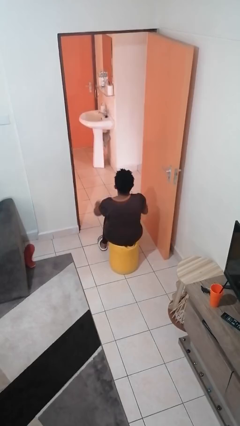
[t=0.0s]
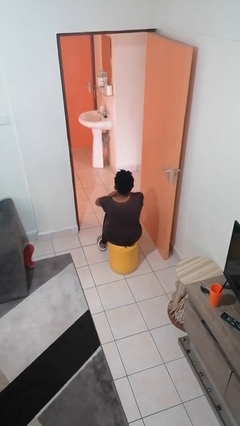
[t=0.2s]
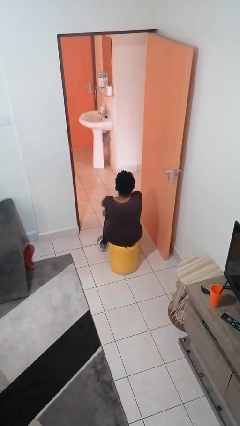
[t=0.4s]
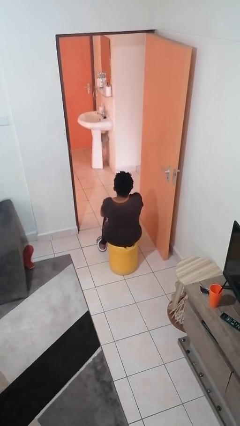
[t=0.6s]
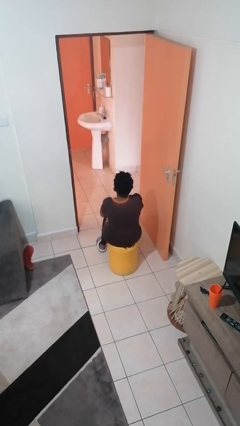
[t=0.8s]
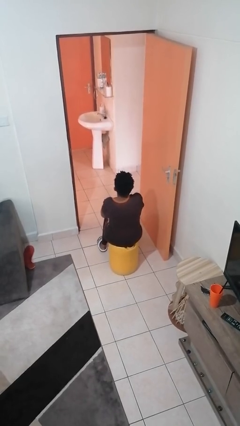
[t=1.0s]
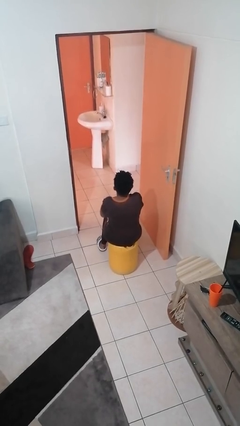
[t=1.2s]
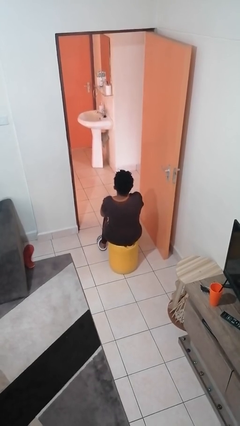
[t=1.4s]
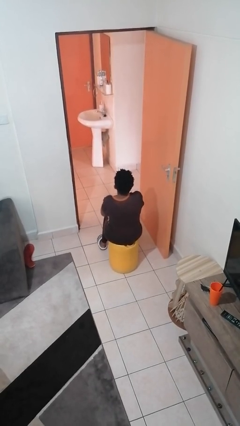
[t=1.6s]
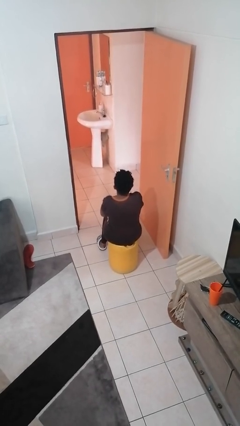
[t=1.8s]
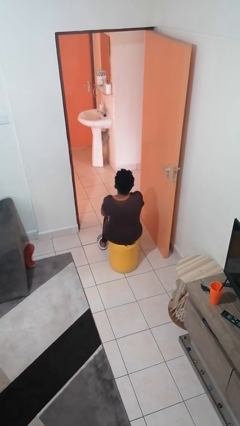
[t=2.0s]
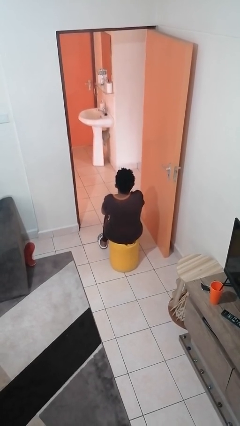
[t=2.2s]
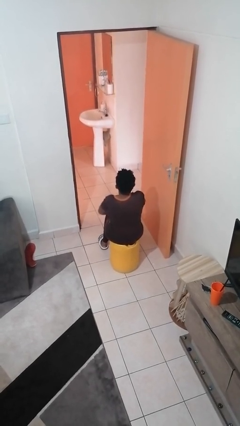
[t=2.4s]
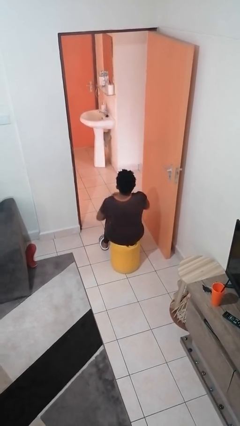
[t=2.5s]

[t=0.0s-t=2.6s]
person crosses arms

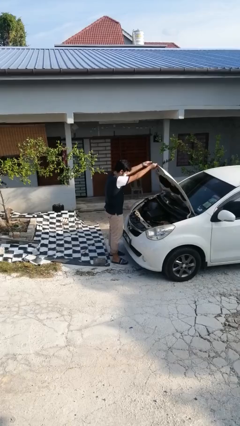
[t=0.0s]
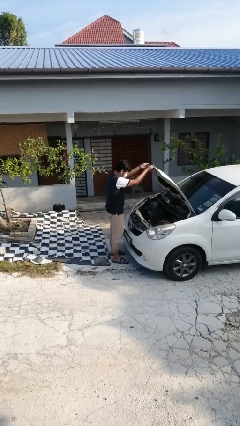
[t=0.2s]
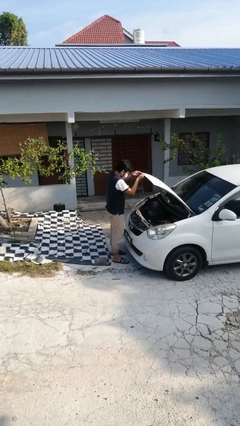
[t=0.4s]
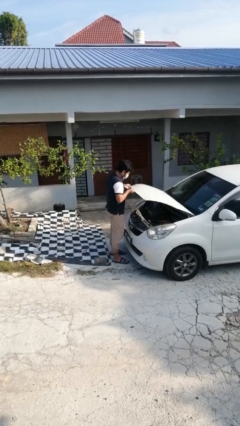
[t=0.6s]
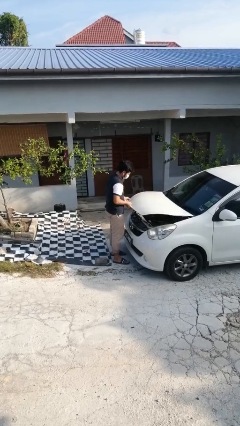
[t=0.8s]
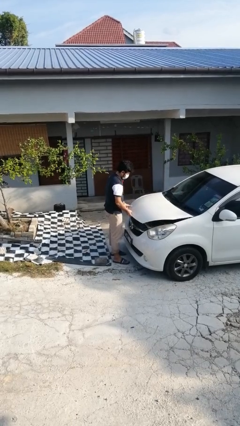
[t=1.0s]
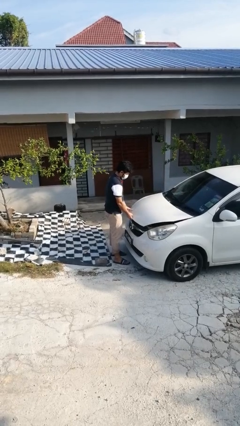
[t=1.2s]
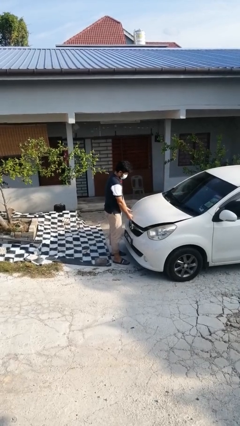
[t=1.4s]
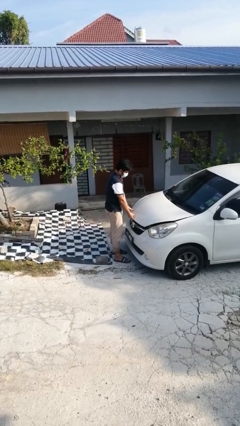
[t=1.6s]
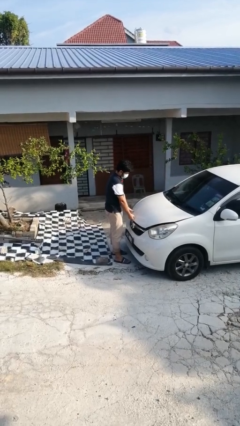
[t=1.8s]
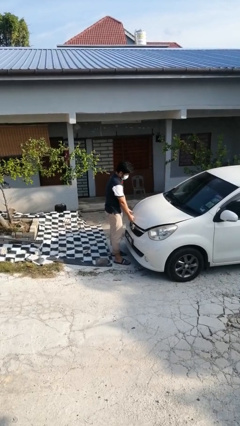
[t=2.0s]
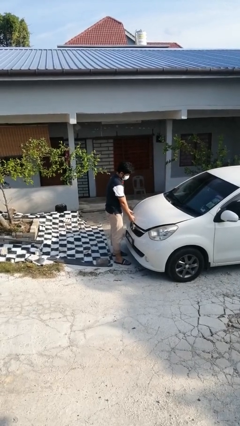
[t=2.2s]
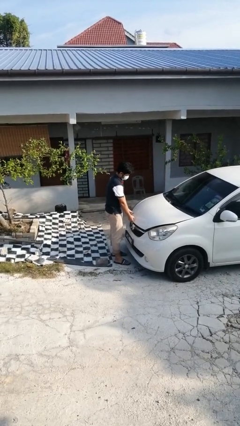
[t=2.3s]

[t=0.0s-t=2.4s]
person closes car hood

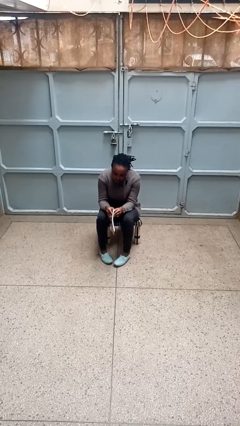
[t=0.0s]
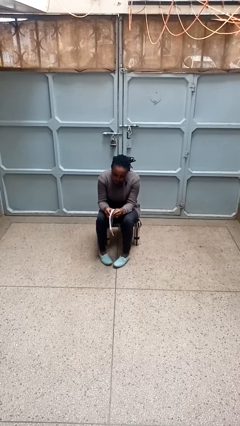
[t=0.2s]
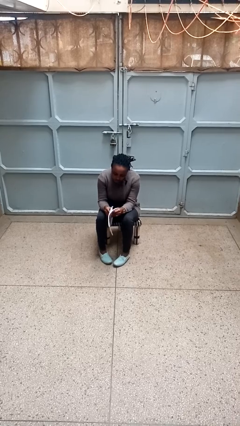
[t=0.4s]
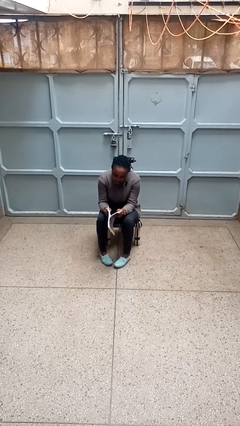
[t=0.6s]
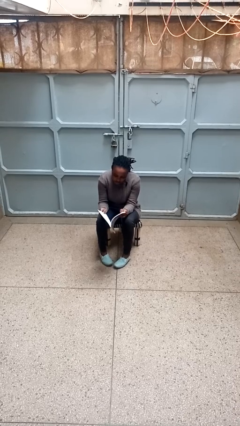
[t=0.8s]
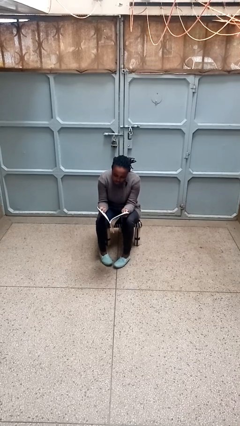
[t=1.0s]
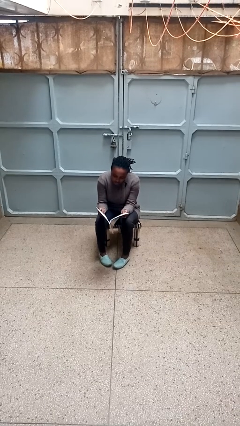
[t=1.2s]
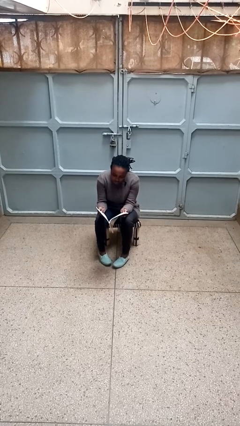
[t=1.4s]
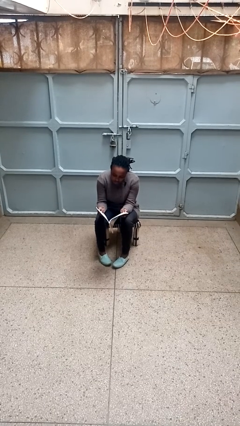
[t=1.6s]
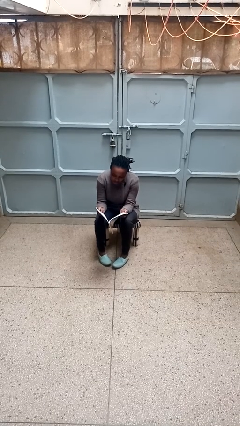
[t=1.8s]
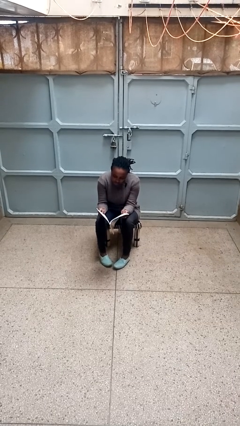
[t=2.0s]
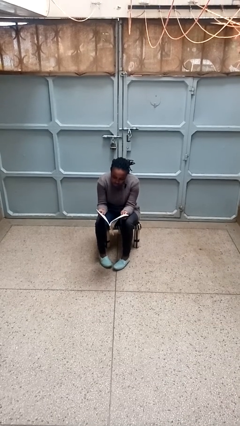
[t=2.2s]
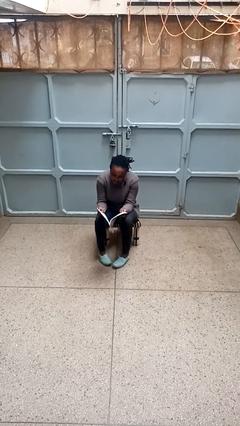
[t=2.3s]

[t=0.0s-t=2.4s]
person reads magazine

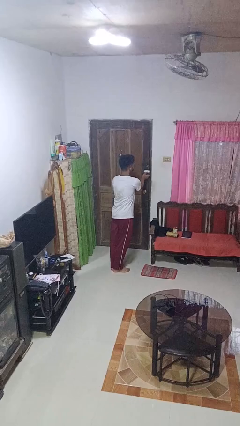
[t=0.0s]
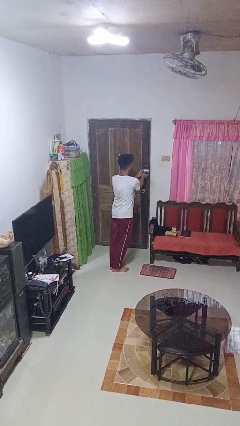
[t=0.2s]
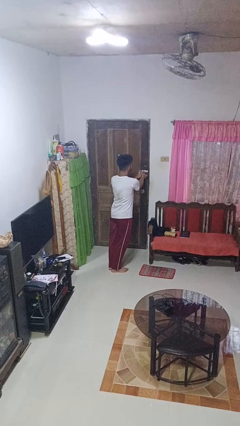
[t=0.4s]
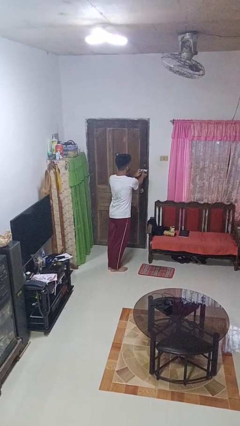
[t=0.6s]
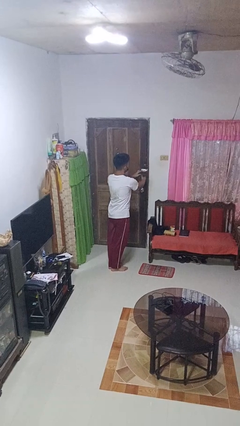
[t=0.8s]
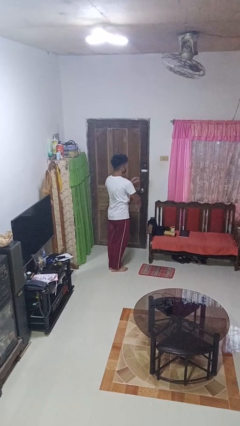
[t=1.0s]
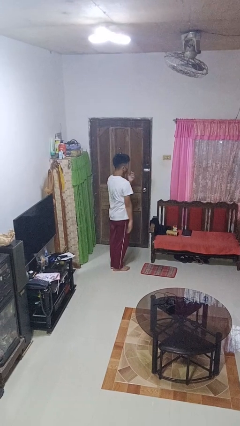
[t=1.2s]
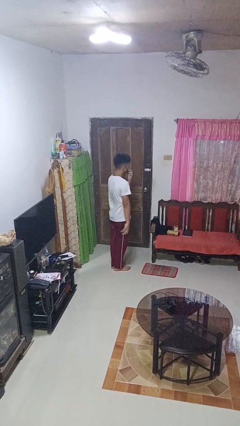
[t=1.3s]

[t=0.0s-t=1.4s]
person locks door with keys

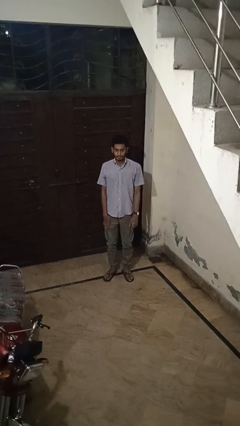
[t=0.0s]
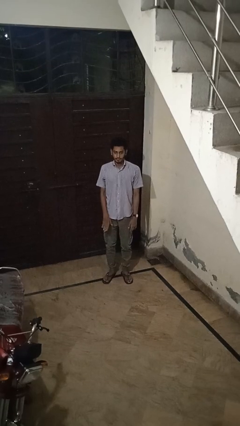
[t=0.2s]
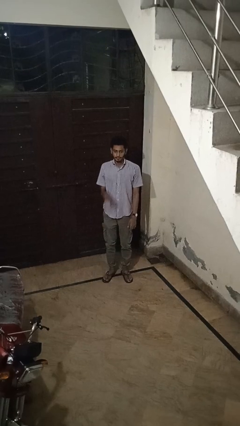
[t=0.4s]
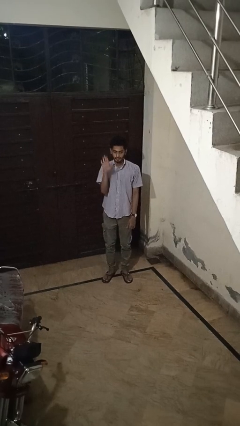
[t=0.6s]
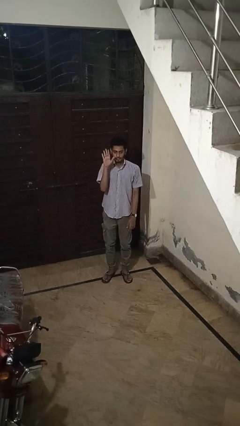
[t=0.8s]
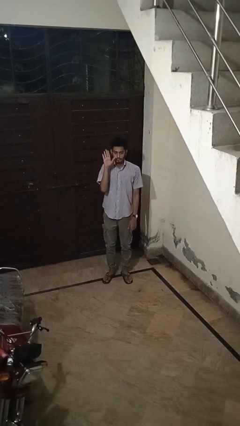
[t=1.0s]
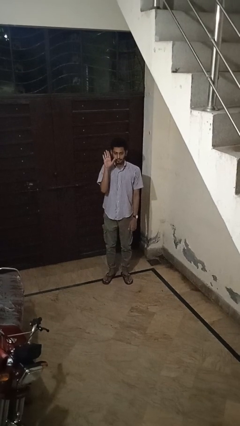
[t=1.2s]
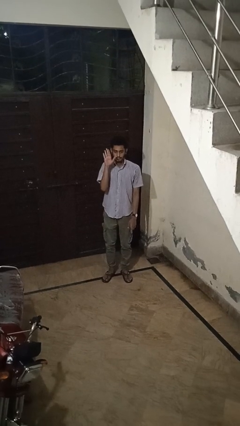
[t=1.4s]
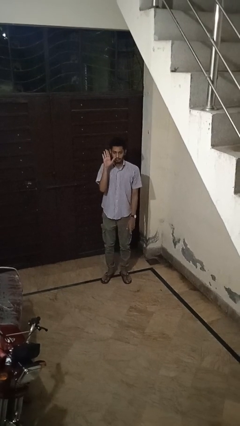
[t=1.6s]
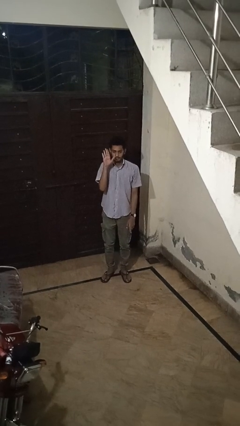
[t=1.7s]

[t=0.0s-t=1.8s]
person gestures raise hand

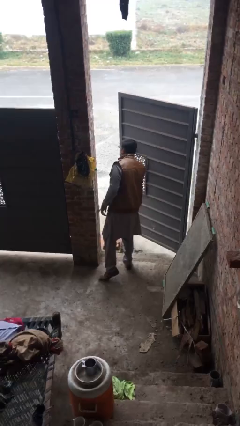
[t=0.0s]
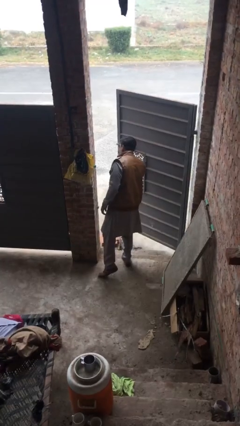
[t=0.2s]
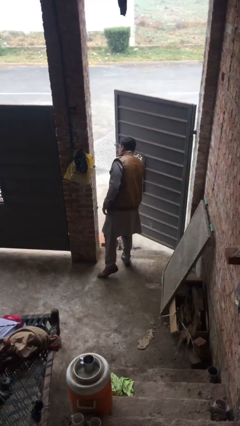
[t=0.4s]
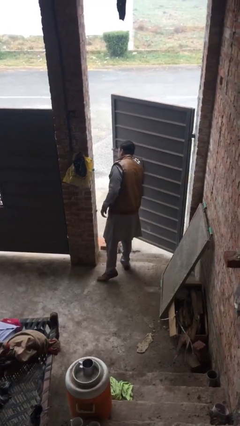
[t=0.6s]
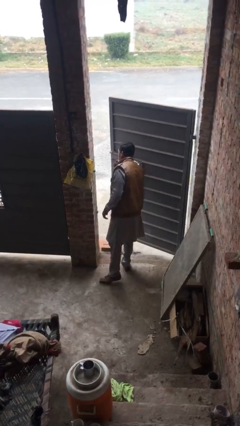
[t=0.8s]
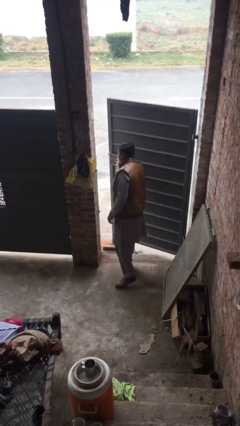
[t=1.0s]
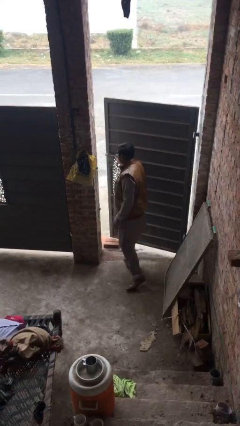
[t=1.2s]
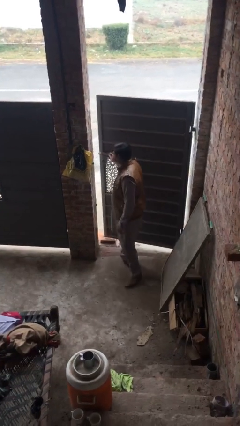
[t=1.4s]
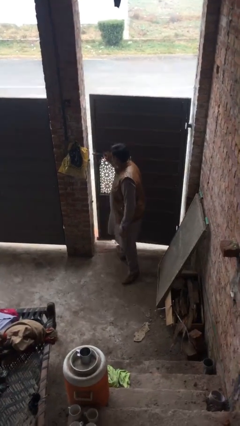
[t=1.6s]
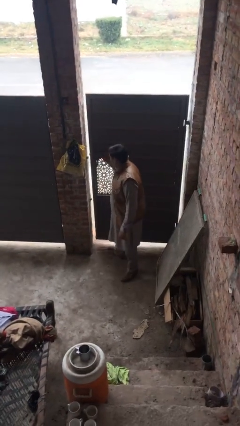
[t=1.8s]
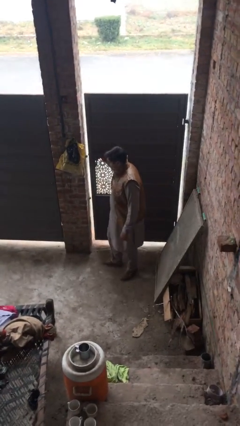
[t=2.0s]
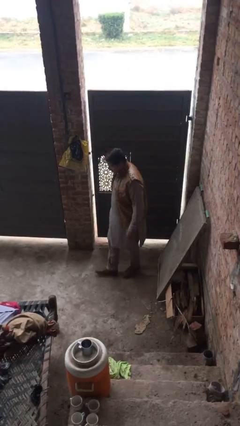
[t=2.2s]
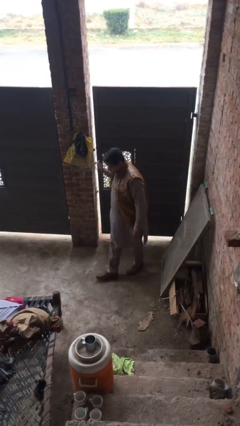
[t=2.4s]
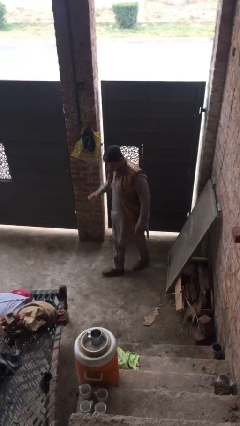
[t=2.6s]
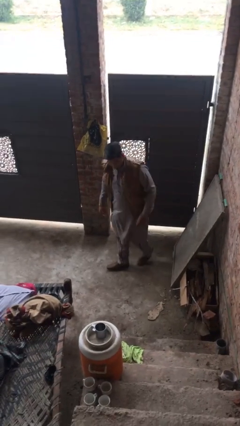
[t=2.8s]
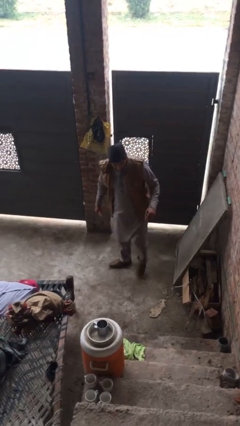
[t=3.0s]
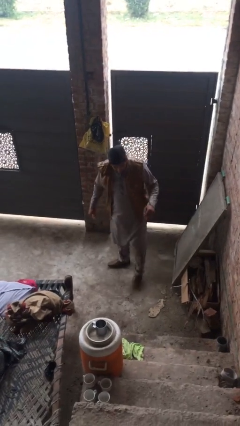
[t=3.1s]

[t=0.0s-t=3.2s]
person closes facility door

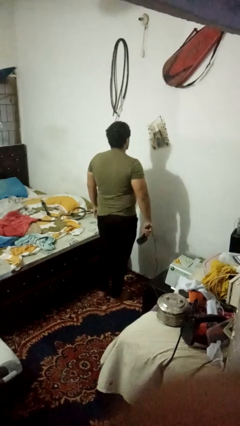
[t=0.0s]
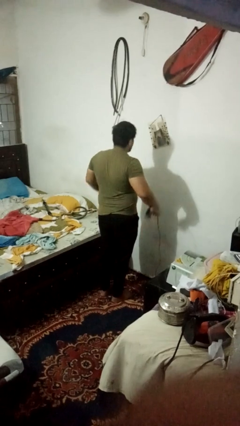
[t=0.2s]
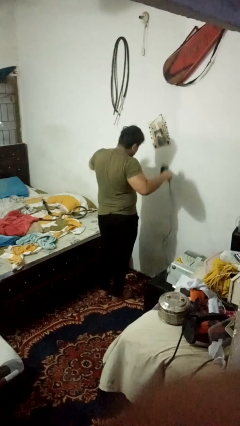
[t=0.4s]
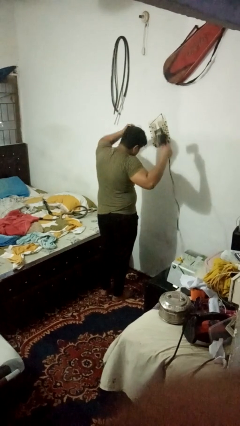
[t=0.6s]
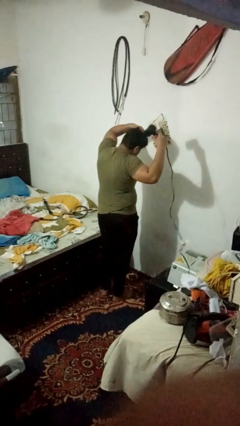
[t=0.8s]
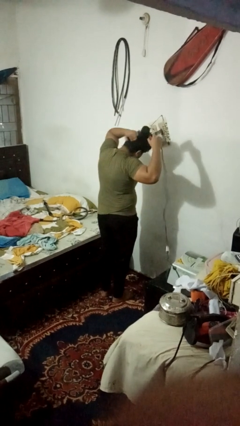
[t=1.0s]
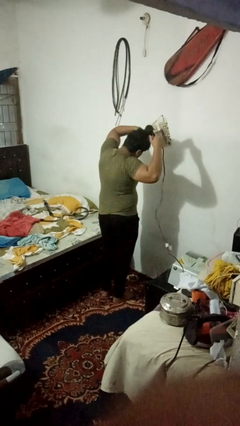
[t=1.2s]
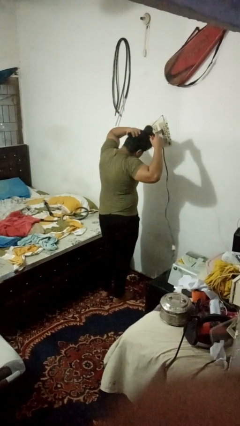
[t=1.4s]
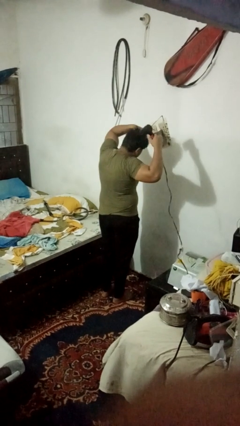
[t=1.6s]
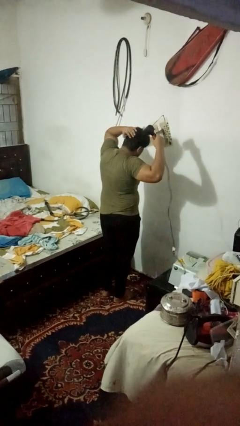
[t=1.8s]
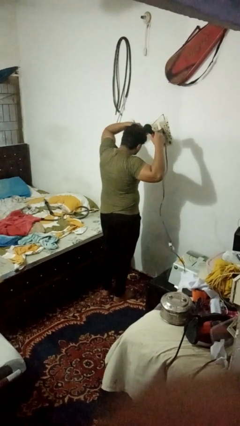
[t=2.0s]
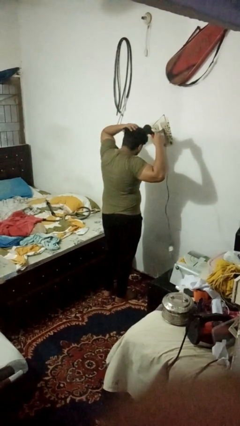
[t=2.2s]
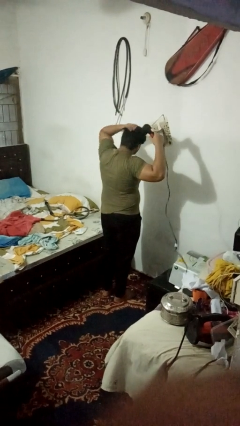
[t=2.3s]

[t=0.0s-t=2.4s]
person dries hair with hairdryer

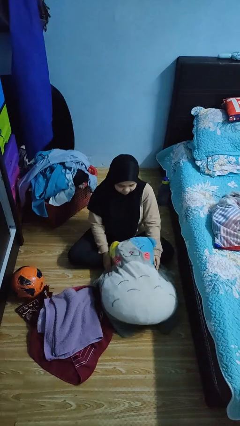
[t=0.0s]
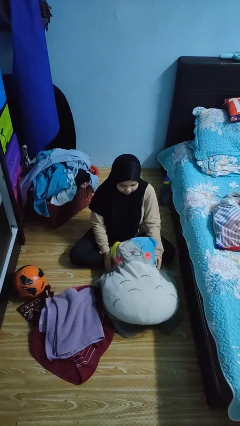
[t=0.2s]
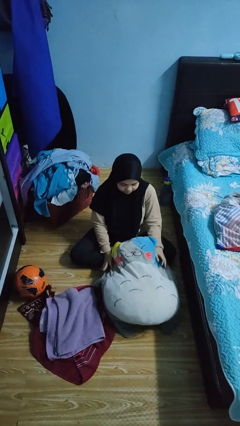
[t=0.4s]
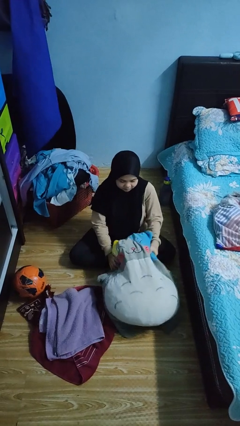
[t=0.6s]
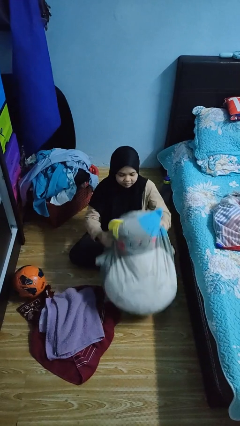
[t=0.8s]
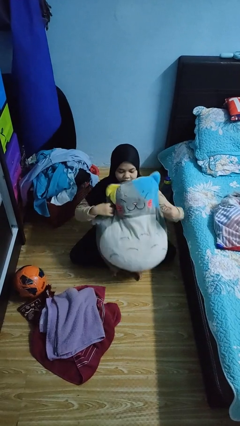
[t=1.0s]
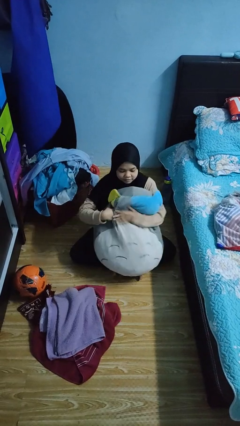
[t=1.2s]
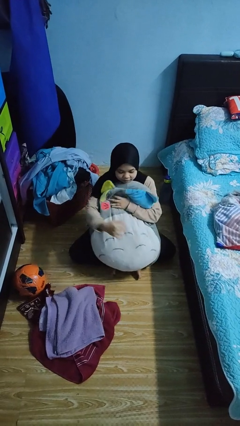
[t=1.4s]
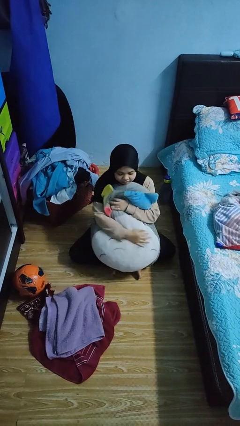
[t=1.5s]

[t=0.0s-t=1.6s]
person hugs stuffed animal
